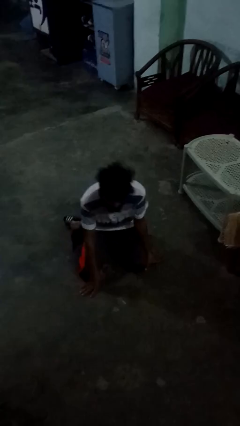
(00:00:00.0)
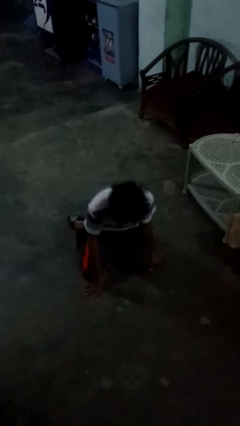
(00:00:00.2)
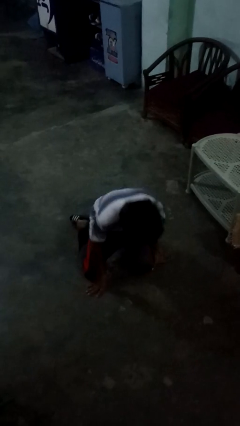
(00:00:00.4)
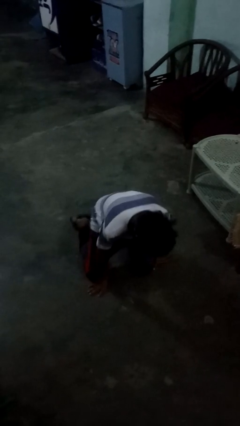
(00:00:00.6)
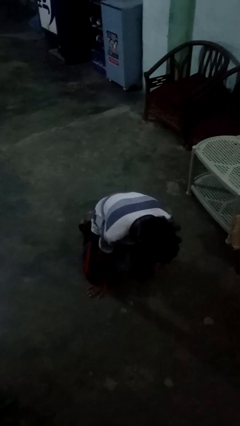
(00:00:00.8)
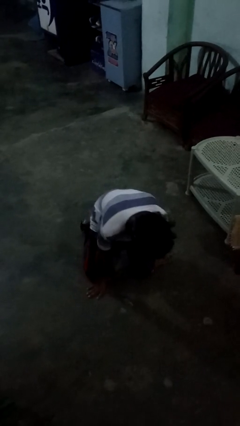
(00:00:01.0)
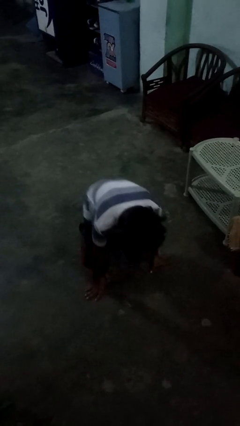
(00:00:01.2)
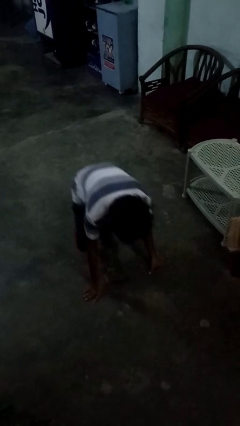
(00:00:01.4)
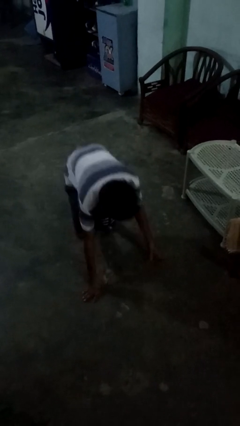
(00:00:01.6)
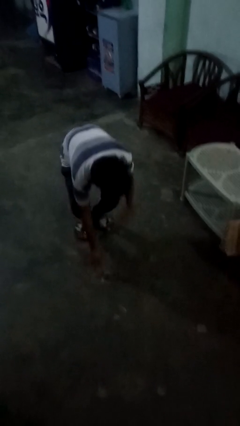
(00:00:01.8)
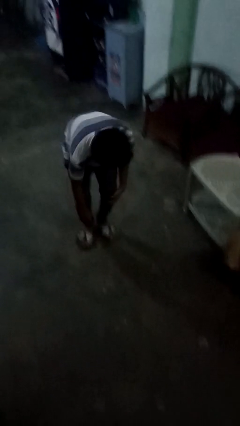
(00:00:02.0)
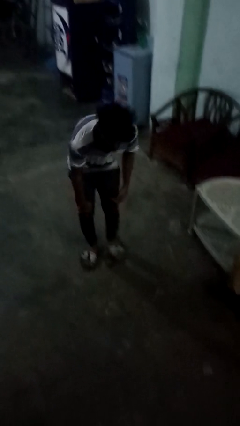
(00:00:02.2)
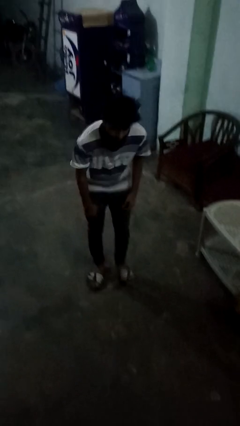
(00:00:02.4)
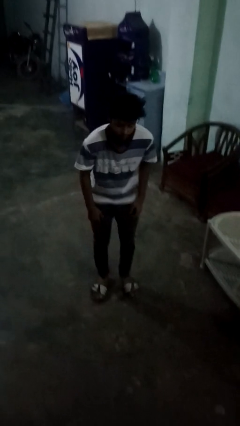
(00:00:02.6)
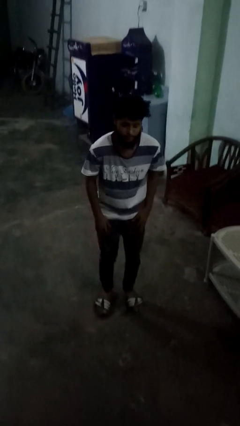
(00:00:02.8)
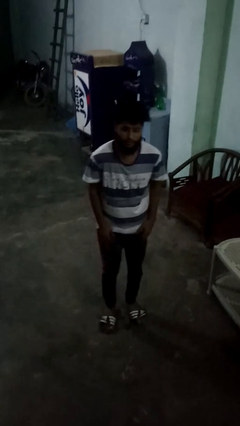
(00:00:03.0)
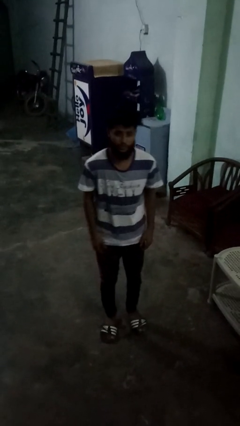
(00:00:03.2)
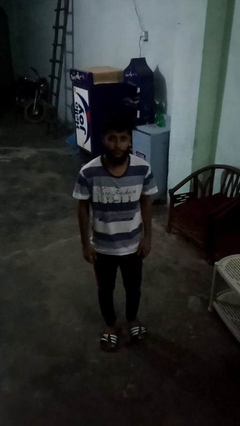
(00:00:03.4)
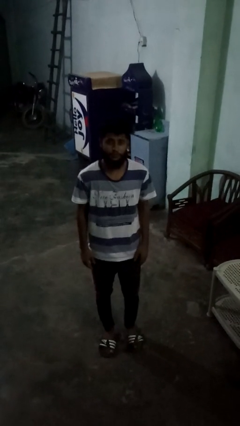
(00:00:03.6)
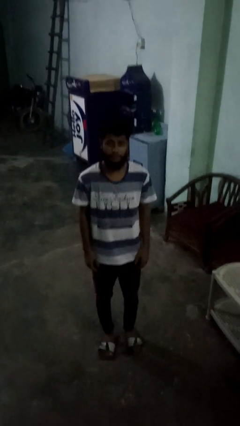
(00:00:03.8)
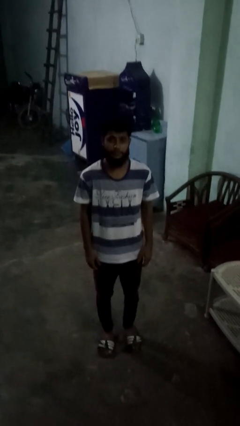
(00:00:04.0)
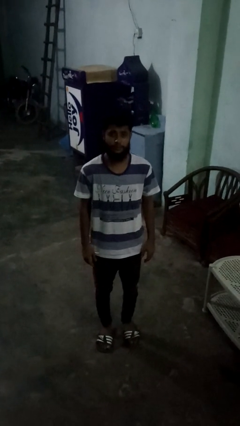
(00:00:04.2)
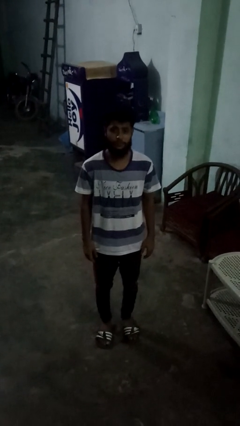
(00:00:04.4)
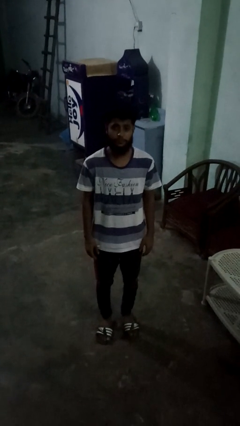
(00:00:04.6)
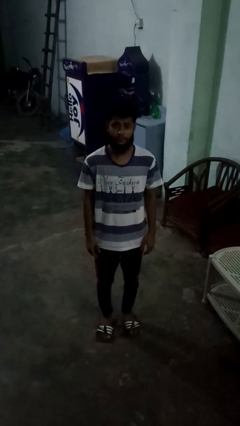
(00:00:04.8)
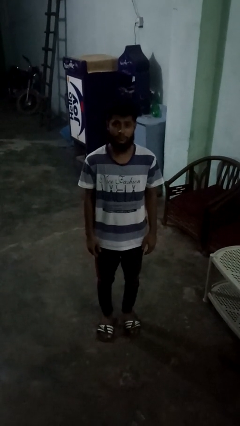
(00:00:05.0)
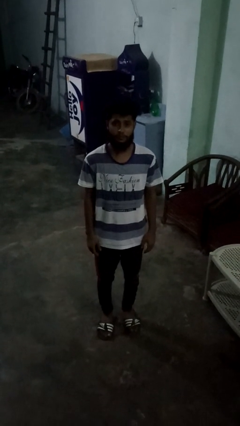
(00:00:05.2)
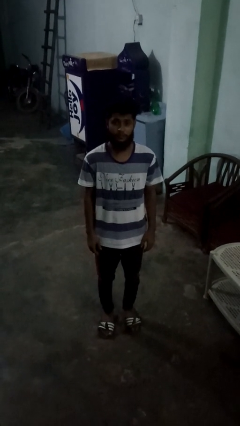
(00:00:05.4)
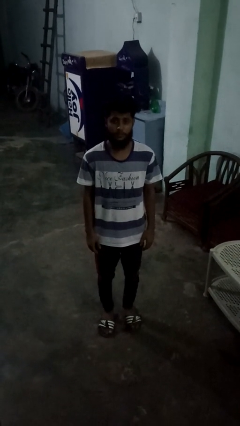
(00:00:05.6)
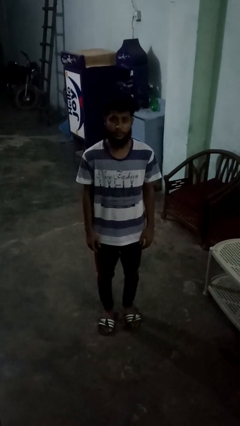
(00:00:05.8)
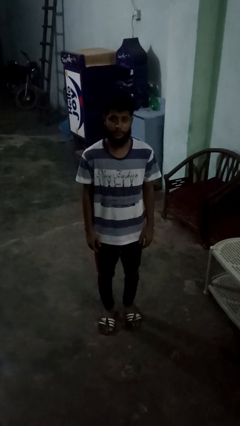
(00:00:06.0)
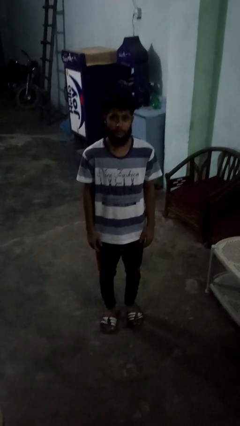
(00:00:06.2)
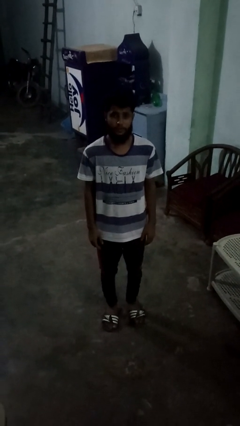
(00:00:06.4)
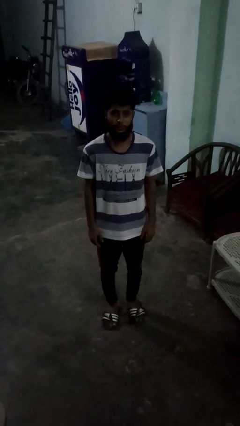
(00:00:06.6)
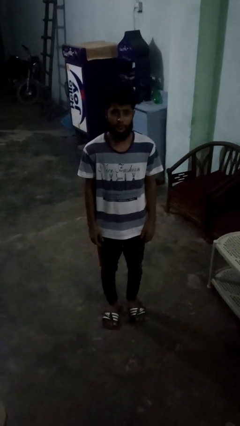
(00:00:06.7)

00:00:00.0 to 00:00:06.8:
person stands up from floor

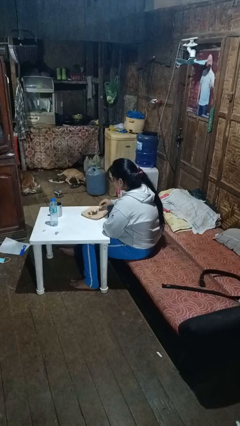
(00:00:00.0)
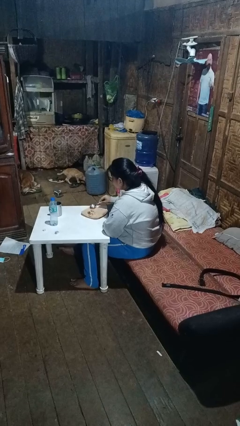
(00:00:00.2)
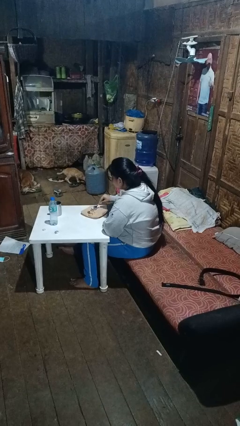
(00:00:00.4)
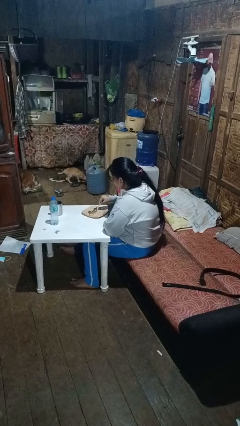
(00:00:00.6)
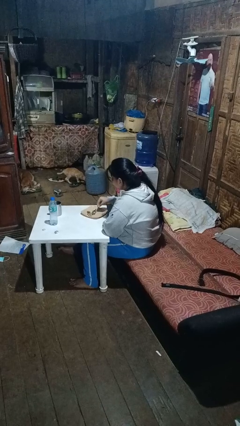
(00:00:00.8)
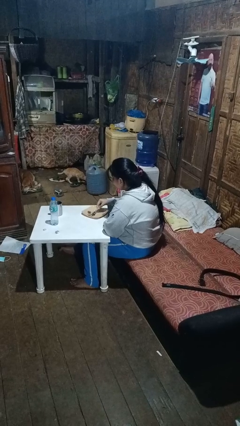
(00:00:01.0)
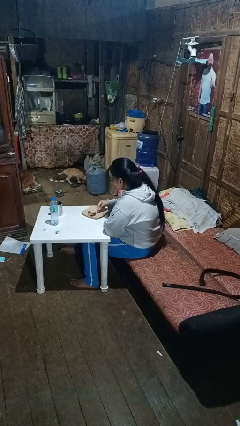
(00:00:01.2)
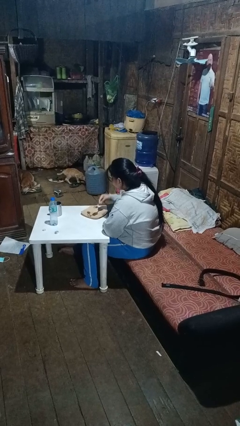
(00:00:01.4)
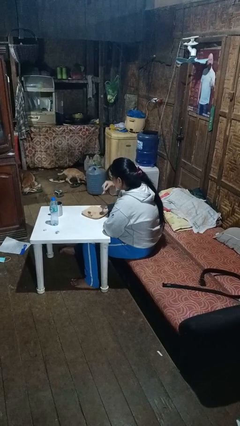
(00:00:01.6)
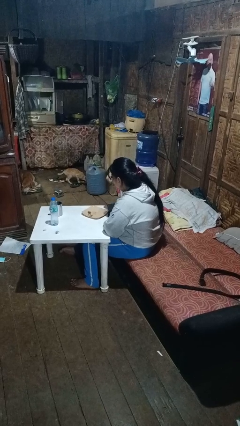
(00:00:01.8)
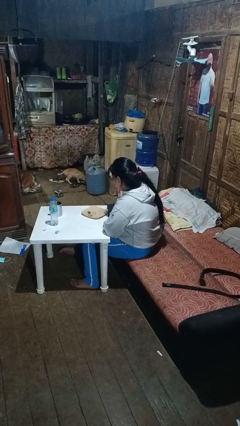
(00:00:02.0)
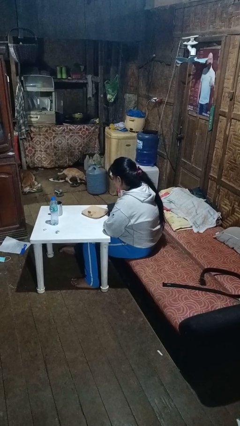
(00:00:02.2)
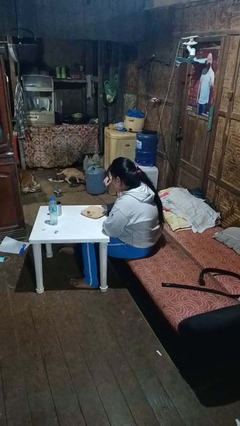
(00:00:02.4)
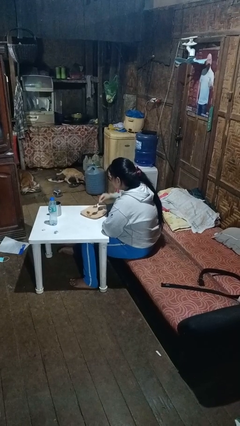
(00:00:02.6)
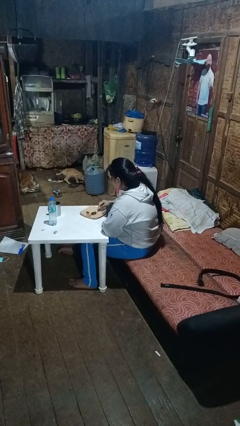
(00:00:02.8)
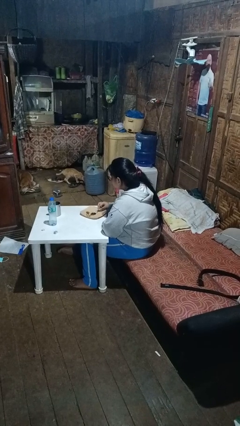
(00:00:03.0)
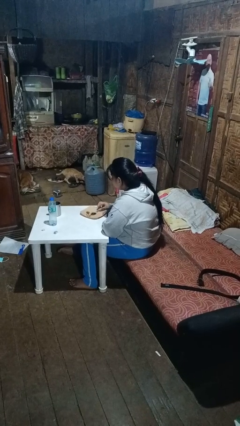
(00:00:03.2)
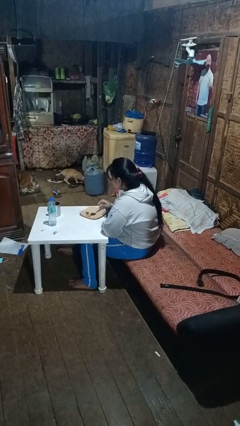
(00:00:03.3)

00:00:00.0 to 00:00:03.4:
person eats with utensil

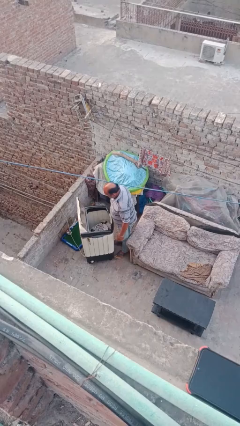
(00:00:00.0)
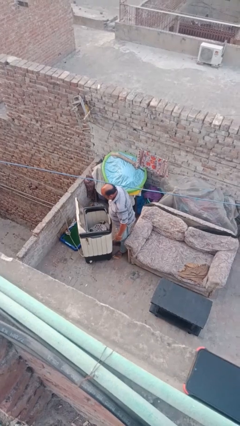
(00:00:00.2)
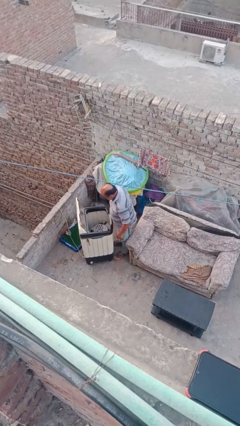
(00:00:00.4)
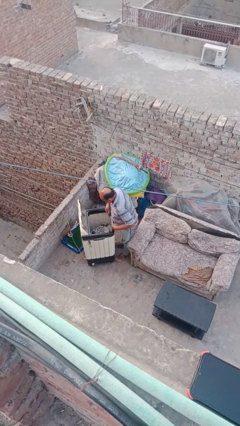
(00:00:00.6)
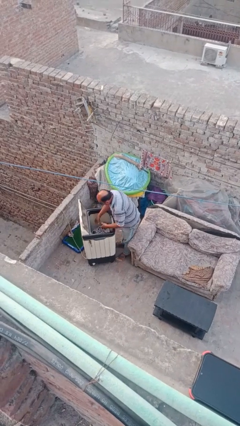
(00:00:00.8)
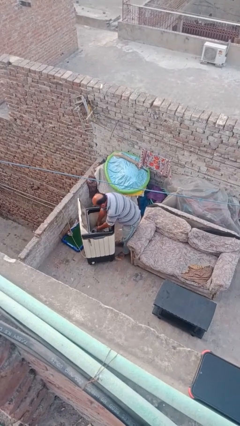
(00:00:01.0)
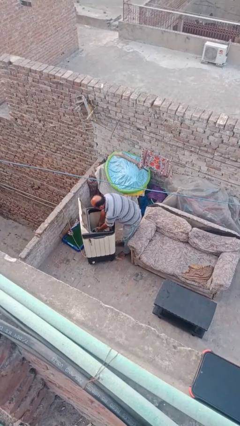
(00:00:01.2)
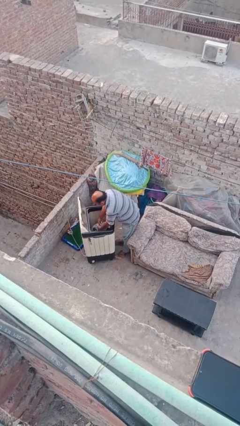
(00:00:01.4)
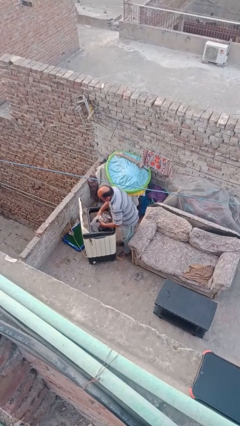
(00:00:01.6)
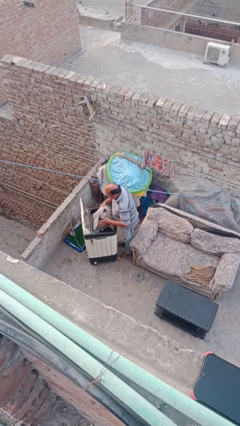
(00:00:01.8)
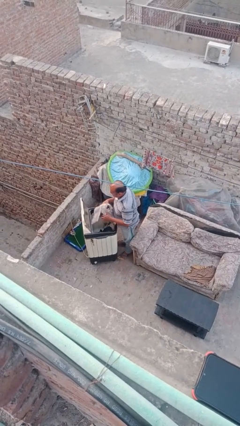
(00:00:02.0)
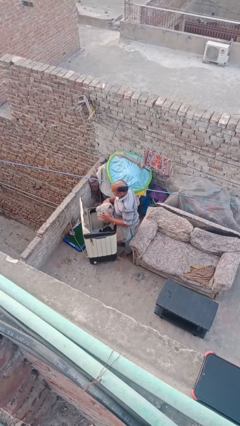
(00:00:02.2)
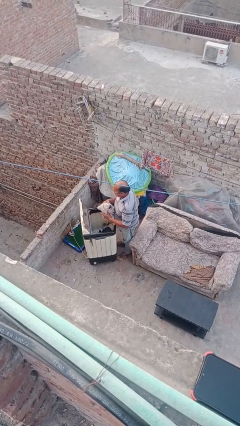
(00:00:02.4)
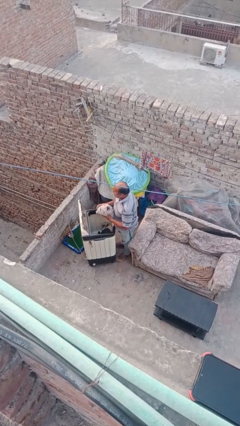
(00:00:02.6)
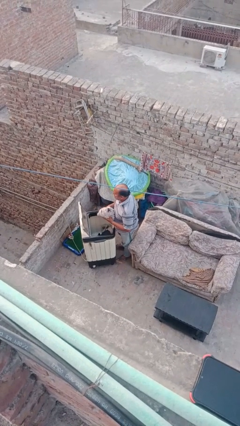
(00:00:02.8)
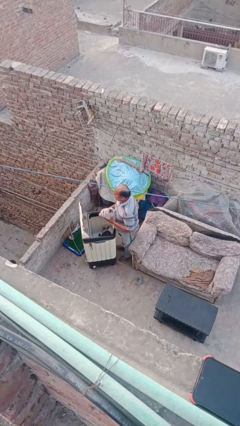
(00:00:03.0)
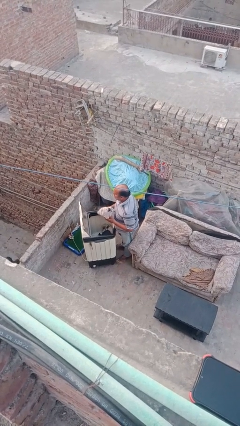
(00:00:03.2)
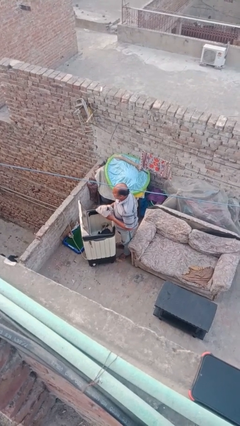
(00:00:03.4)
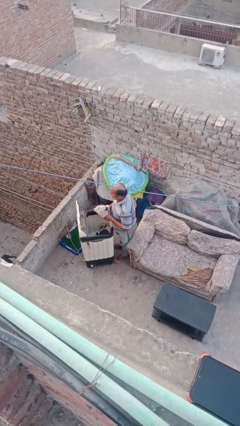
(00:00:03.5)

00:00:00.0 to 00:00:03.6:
person unloads clotheswasher

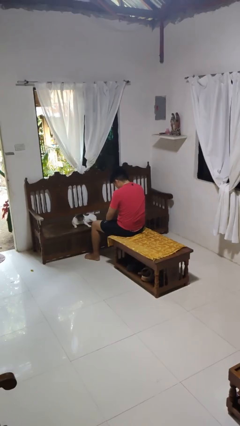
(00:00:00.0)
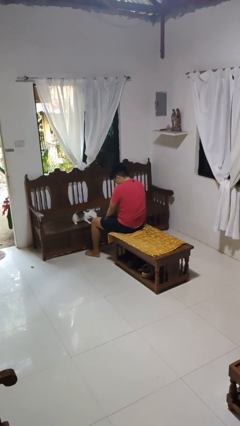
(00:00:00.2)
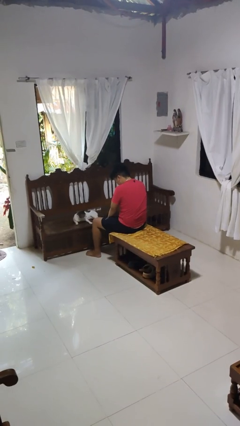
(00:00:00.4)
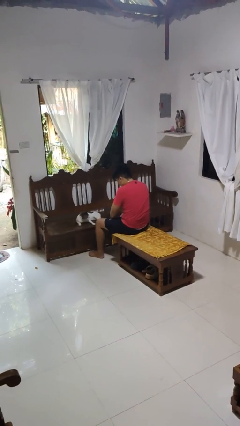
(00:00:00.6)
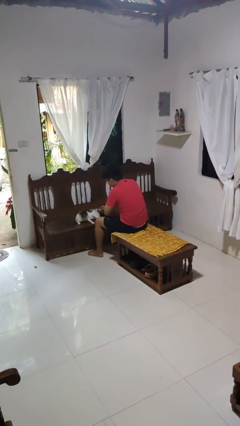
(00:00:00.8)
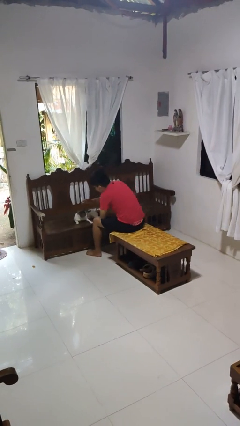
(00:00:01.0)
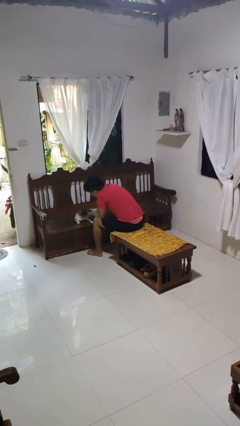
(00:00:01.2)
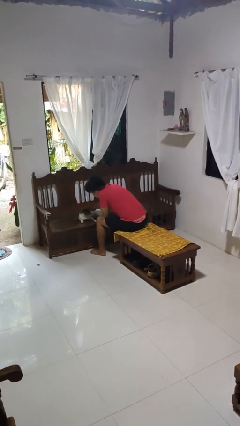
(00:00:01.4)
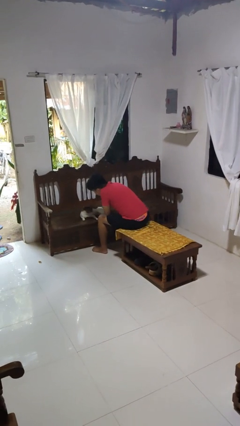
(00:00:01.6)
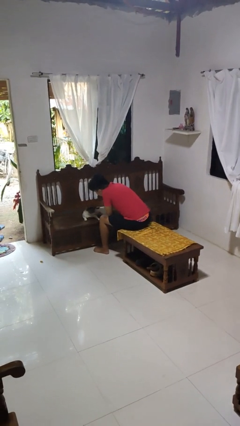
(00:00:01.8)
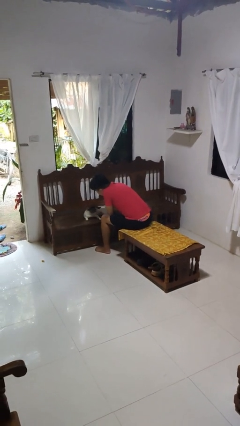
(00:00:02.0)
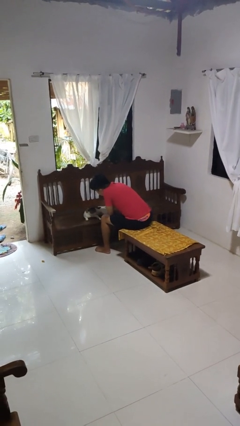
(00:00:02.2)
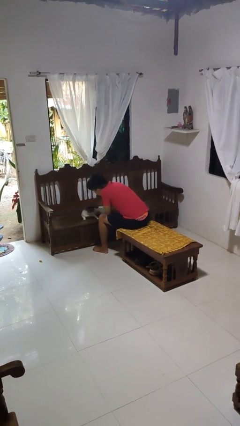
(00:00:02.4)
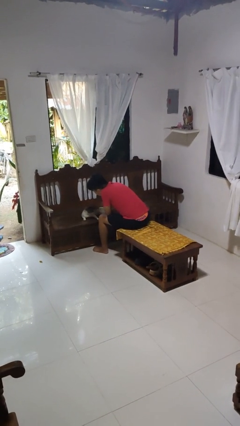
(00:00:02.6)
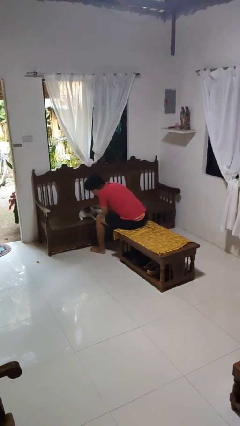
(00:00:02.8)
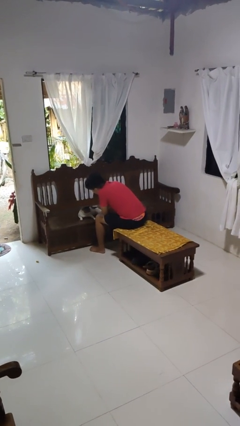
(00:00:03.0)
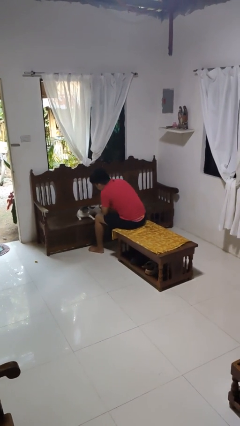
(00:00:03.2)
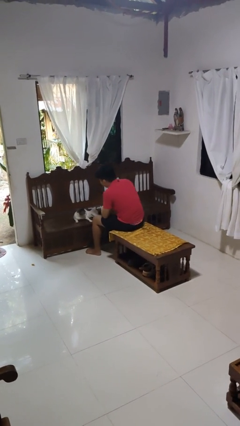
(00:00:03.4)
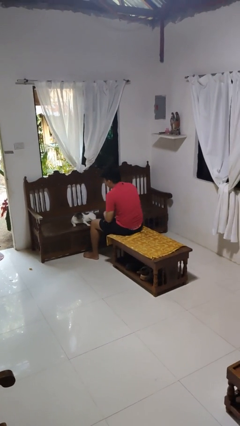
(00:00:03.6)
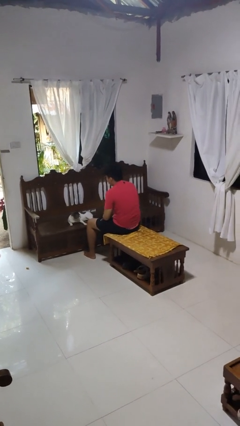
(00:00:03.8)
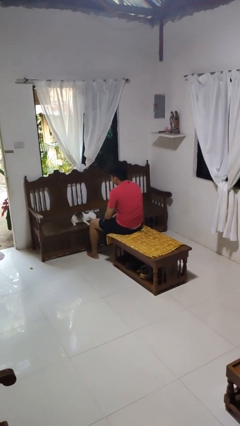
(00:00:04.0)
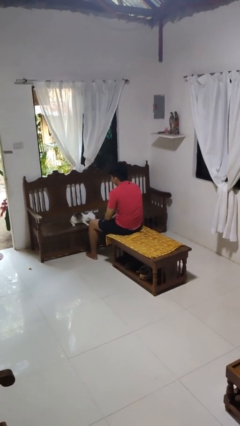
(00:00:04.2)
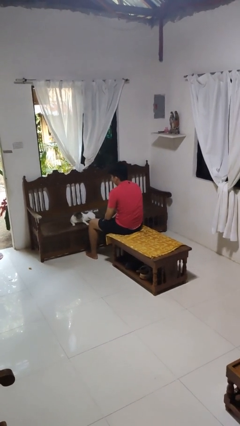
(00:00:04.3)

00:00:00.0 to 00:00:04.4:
person pets cat
